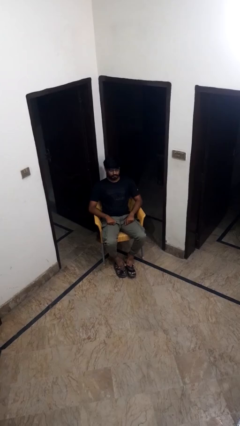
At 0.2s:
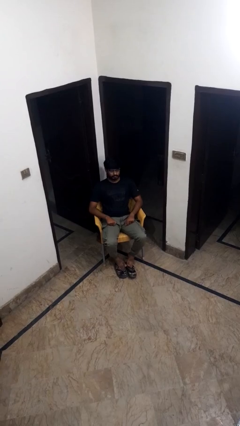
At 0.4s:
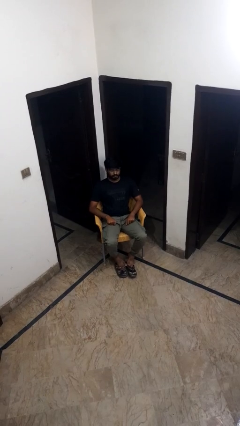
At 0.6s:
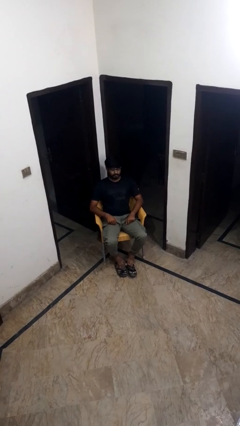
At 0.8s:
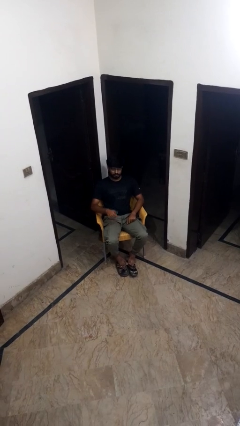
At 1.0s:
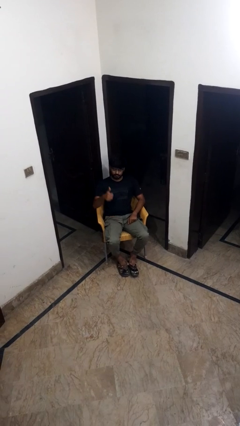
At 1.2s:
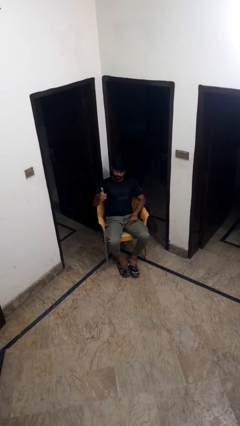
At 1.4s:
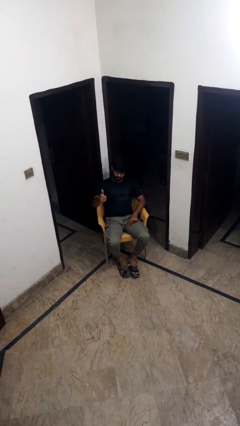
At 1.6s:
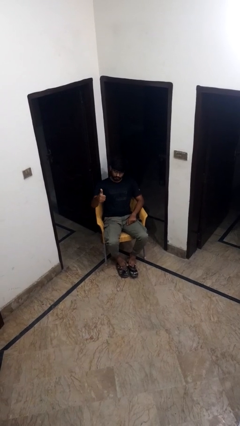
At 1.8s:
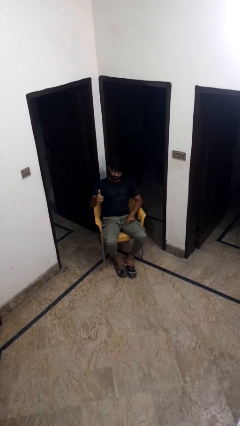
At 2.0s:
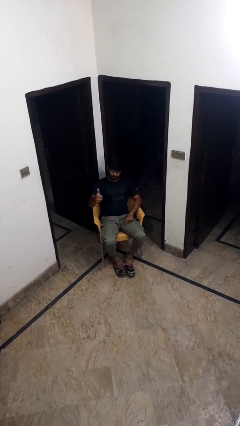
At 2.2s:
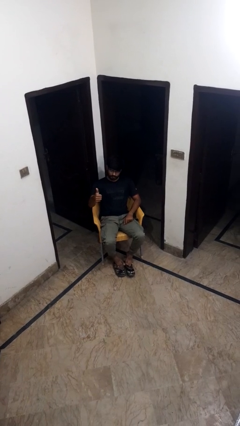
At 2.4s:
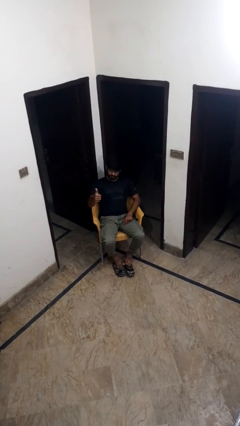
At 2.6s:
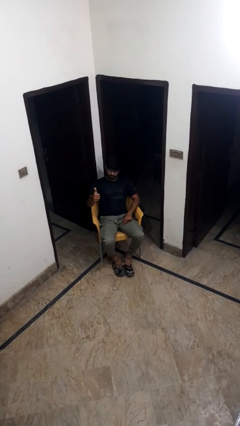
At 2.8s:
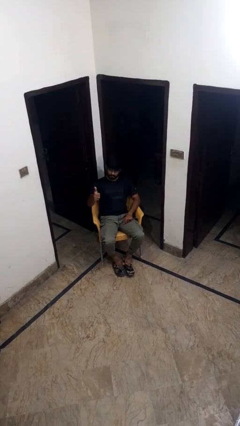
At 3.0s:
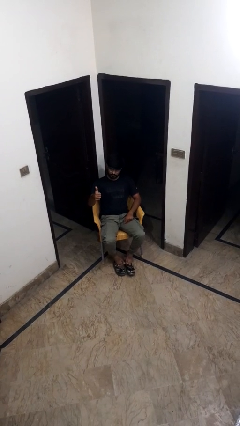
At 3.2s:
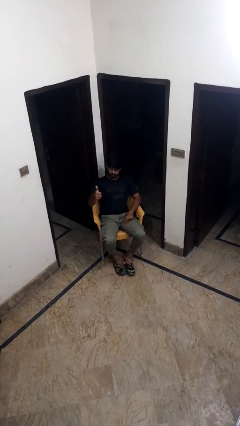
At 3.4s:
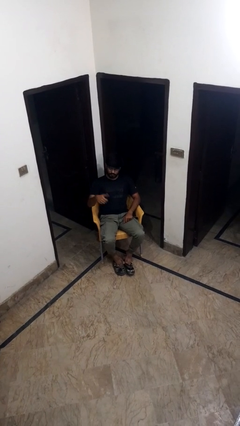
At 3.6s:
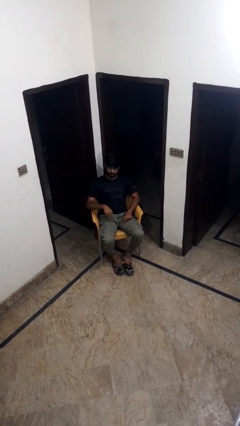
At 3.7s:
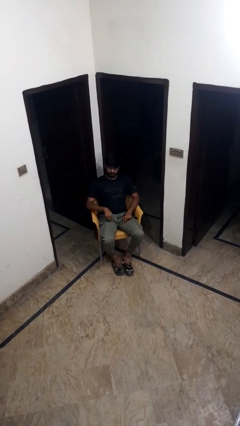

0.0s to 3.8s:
person gestures thumbs up

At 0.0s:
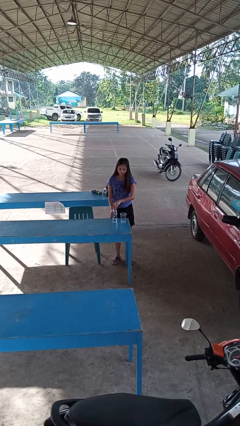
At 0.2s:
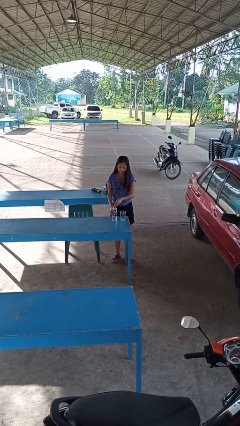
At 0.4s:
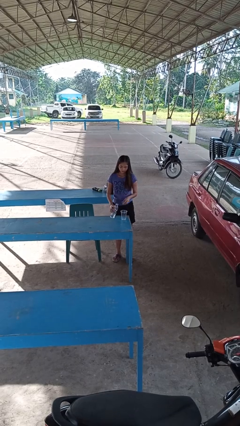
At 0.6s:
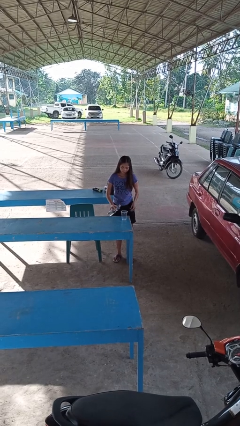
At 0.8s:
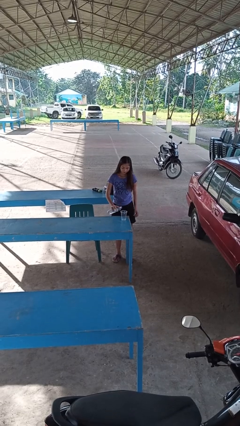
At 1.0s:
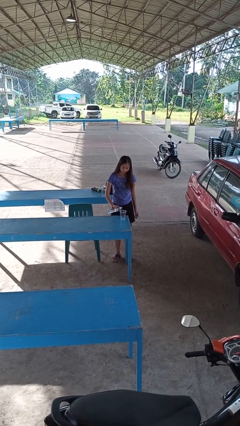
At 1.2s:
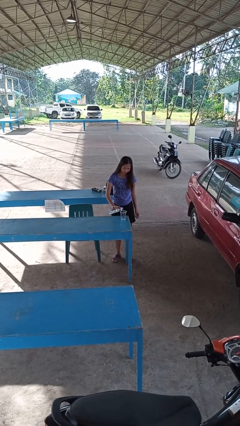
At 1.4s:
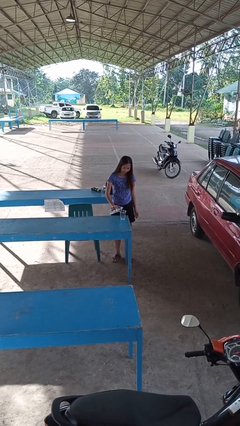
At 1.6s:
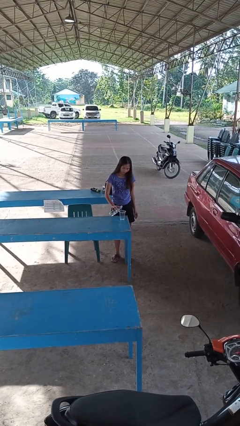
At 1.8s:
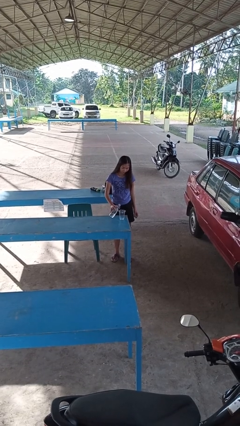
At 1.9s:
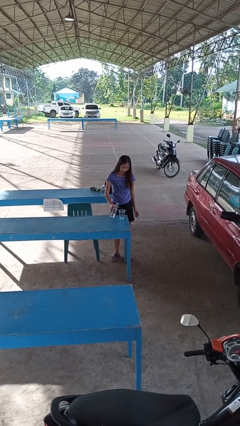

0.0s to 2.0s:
person pours liquid into cup

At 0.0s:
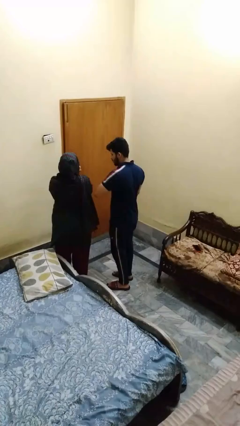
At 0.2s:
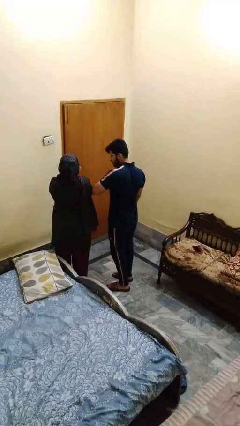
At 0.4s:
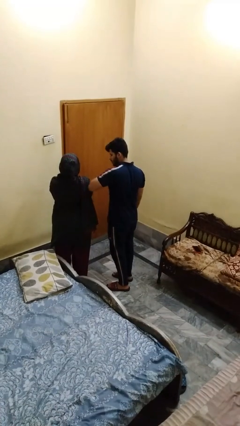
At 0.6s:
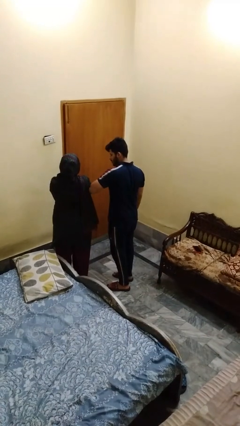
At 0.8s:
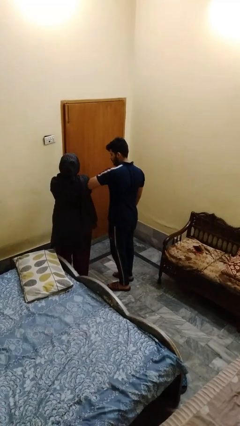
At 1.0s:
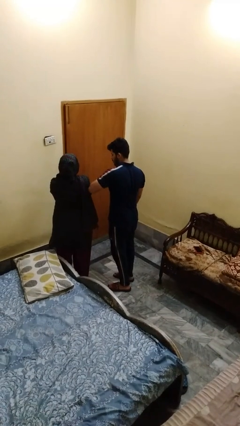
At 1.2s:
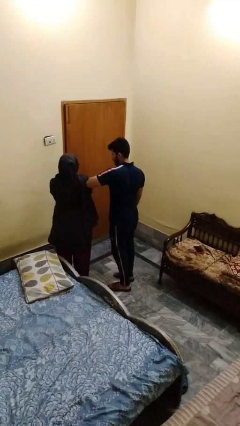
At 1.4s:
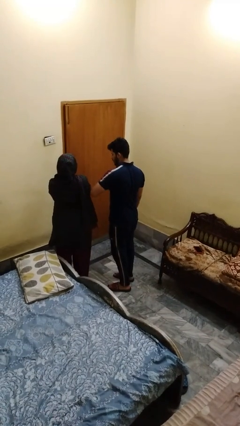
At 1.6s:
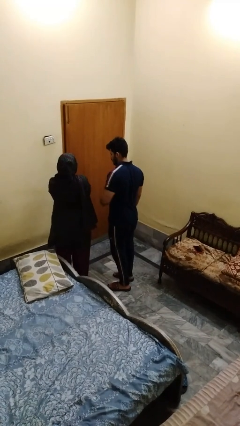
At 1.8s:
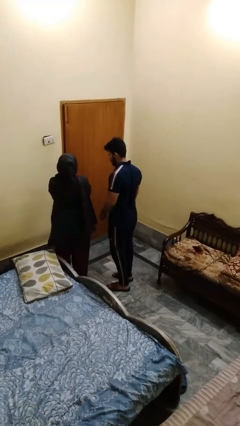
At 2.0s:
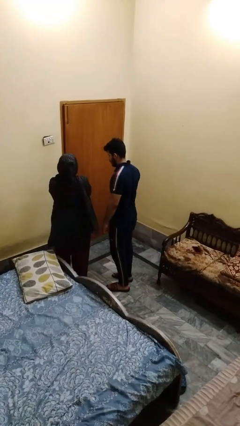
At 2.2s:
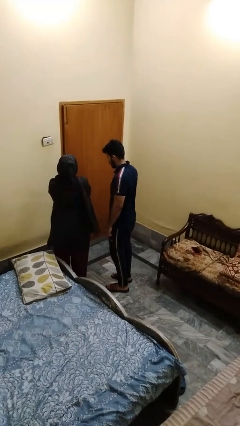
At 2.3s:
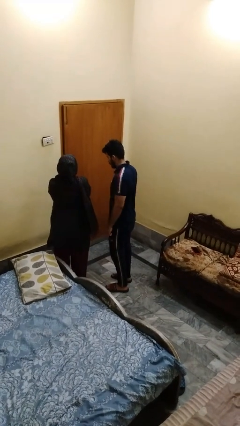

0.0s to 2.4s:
person nudges person with elbow

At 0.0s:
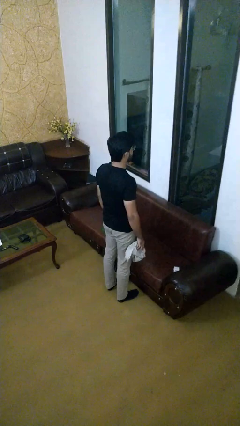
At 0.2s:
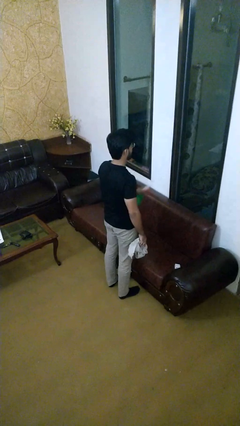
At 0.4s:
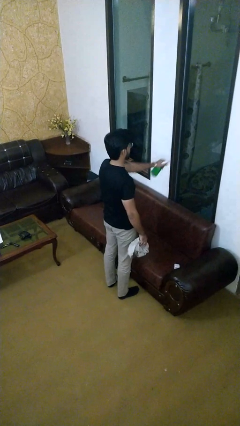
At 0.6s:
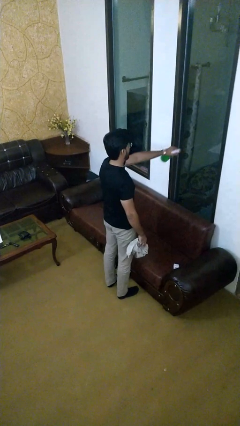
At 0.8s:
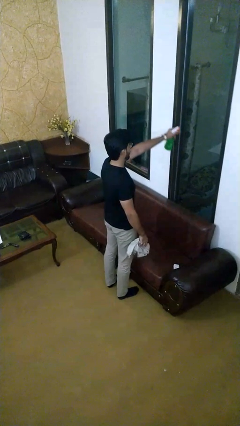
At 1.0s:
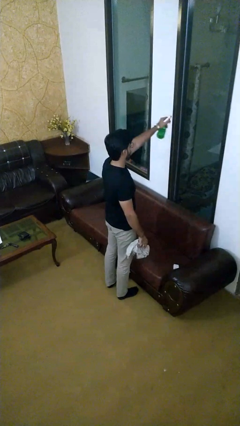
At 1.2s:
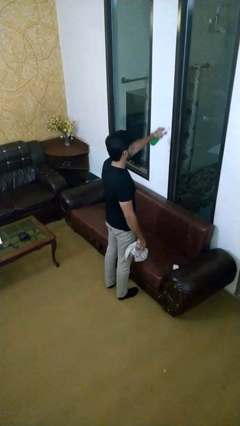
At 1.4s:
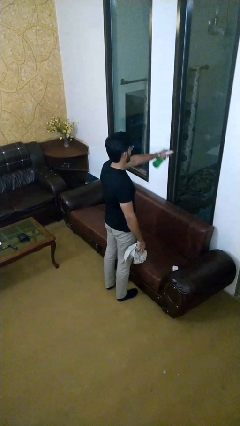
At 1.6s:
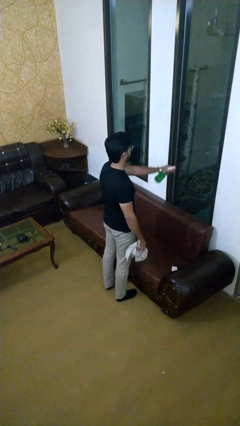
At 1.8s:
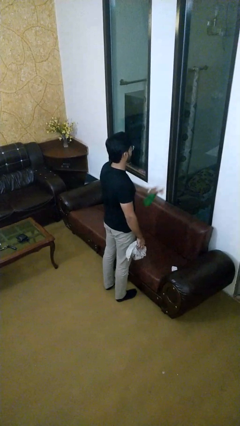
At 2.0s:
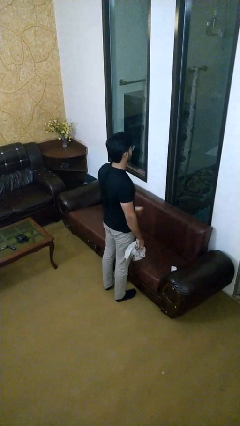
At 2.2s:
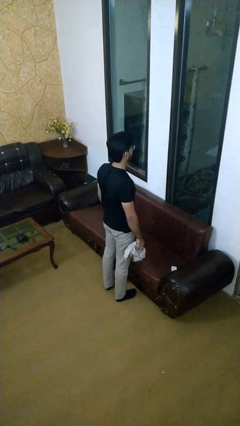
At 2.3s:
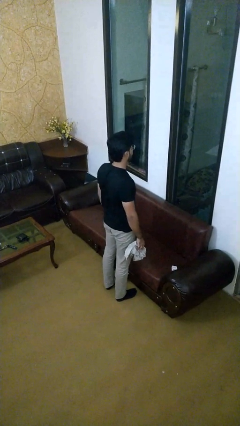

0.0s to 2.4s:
person sprays from bottle

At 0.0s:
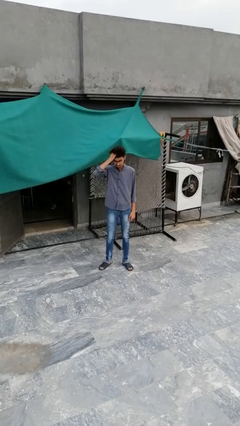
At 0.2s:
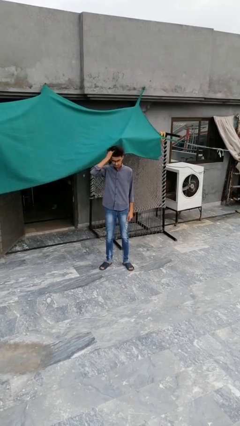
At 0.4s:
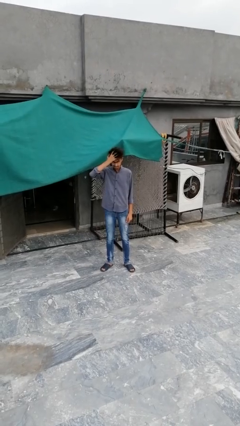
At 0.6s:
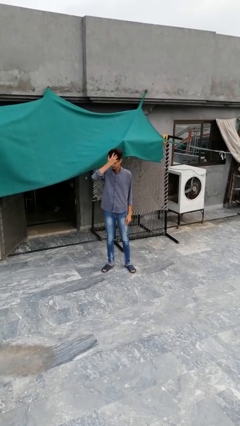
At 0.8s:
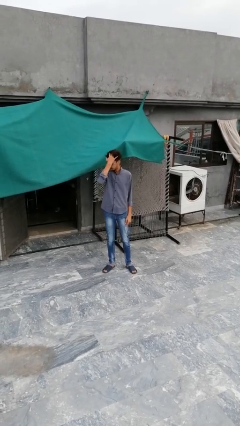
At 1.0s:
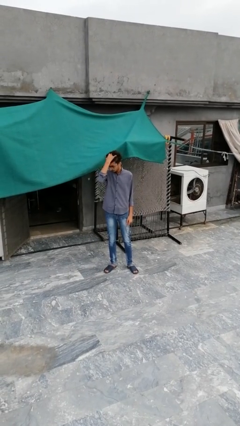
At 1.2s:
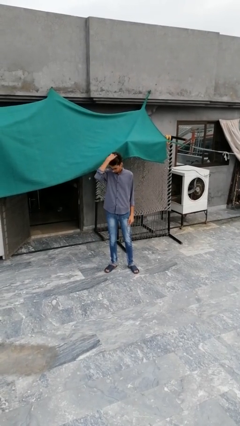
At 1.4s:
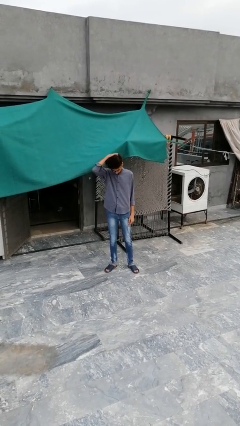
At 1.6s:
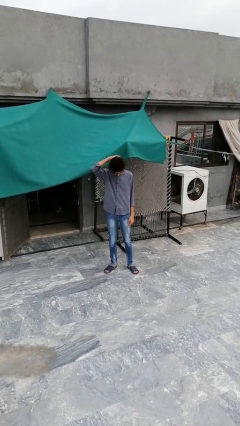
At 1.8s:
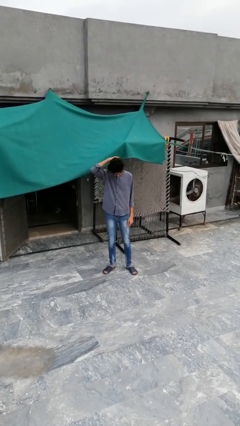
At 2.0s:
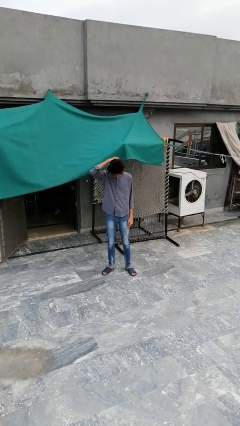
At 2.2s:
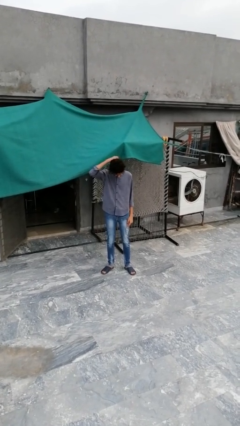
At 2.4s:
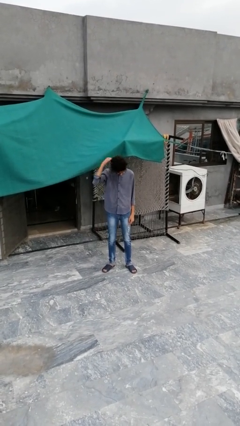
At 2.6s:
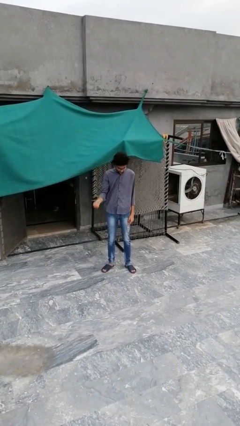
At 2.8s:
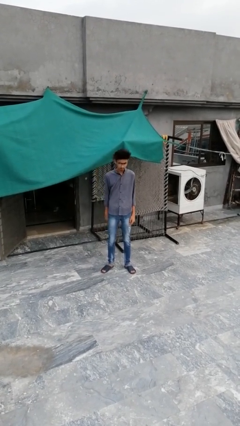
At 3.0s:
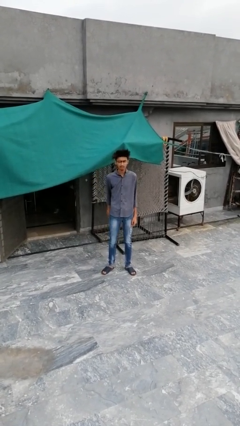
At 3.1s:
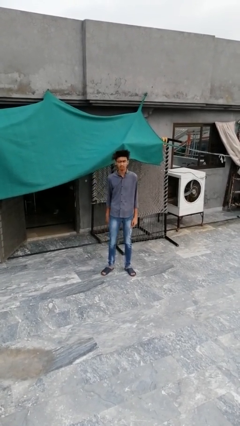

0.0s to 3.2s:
person strokes hair

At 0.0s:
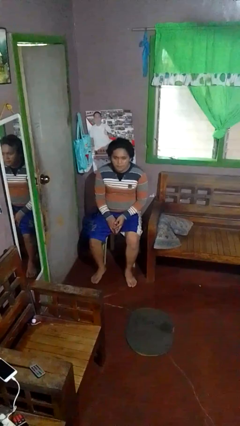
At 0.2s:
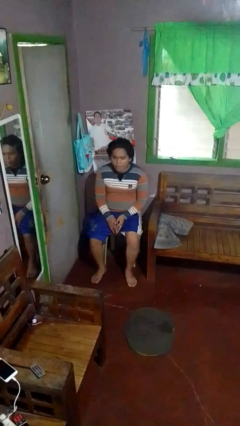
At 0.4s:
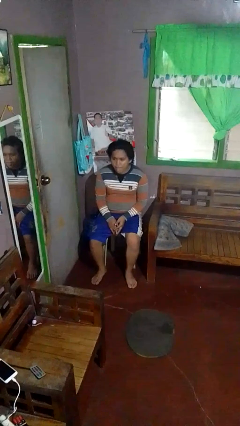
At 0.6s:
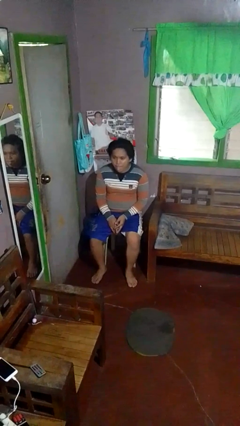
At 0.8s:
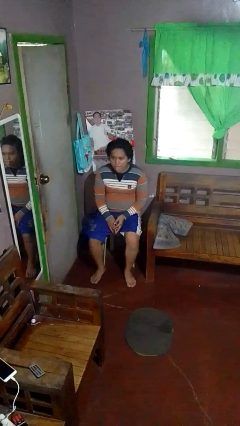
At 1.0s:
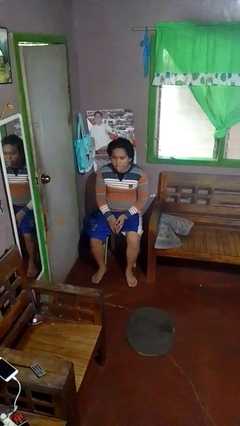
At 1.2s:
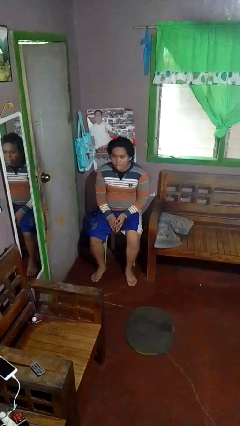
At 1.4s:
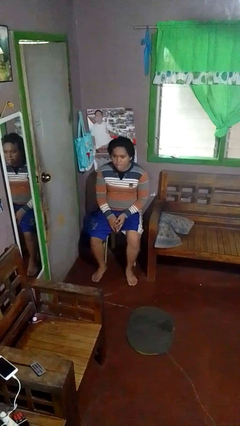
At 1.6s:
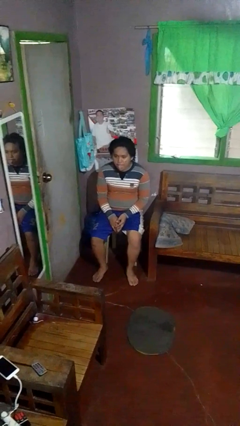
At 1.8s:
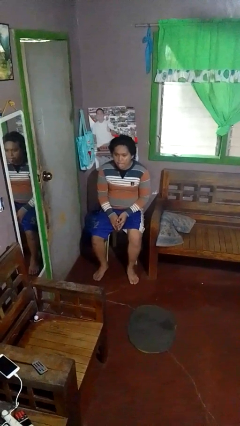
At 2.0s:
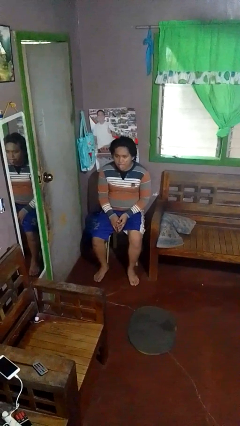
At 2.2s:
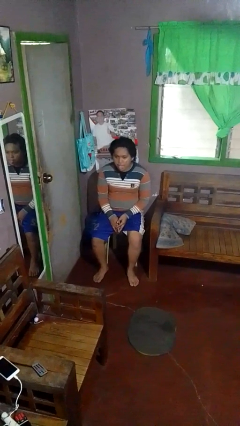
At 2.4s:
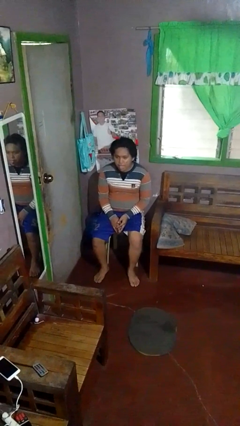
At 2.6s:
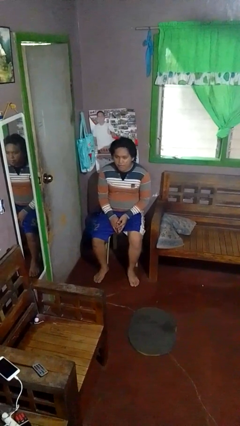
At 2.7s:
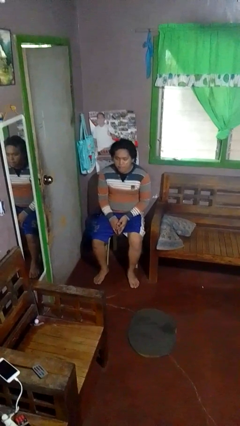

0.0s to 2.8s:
person sticks out tongue

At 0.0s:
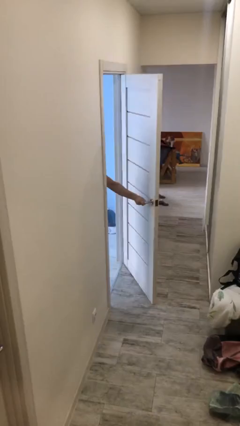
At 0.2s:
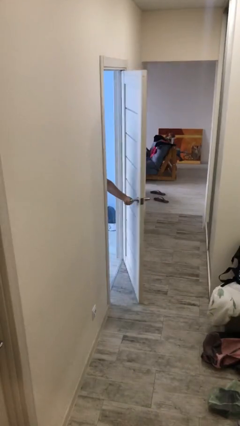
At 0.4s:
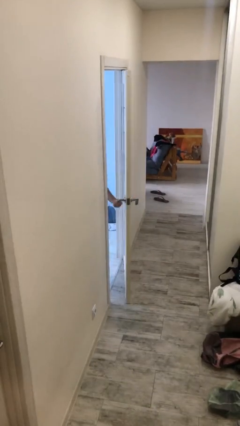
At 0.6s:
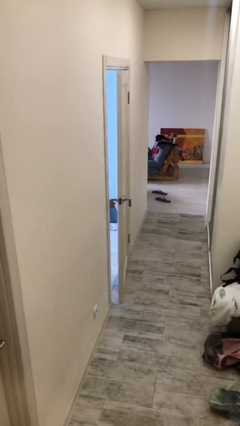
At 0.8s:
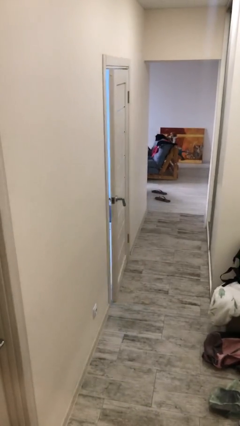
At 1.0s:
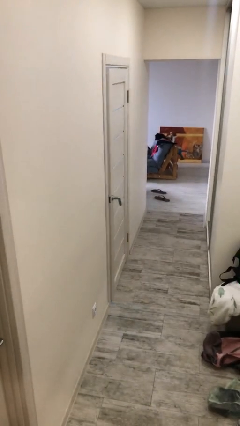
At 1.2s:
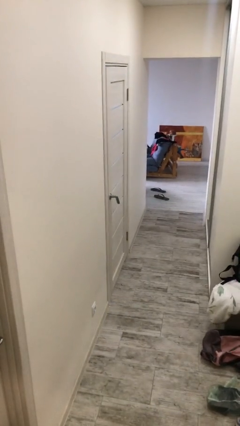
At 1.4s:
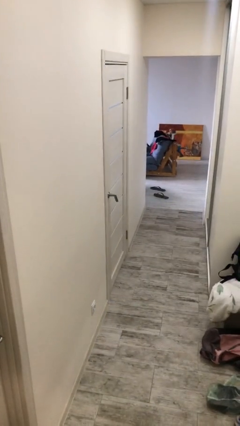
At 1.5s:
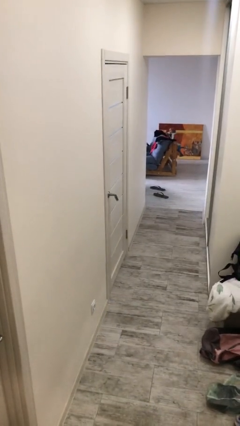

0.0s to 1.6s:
person closes facility door
